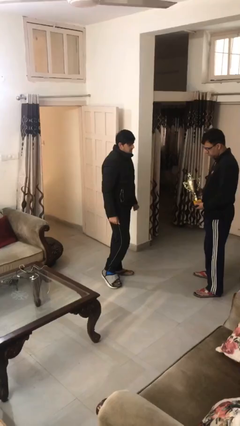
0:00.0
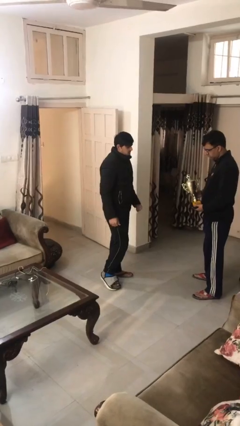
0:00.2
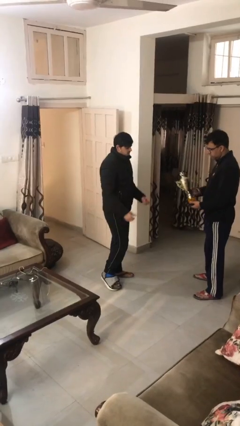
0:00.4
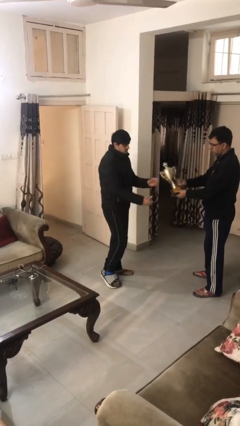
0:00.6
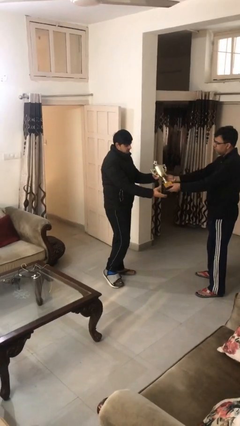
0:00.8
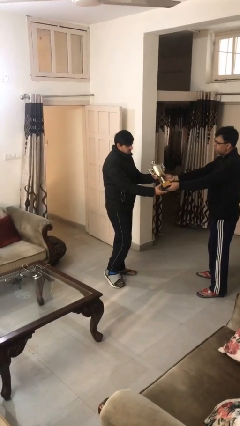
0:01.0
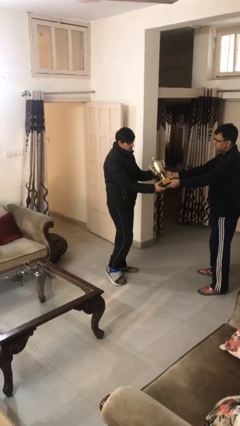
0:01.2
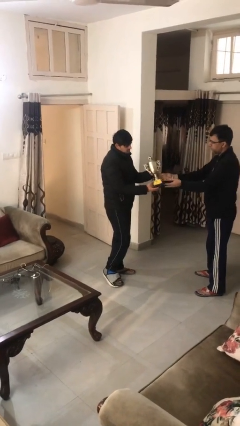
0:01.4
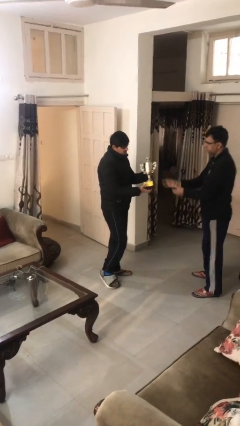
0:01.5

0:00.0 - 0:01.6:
person transfers object to person

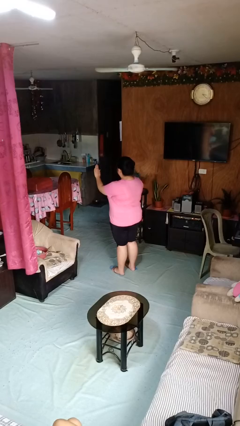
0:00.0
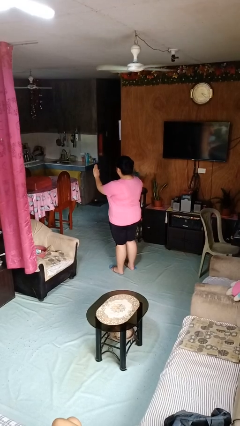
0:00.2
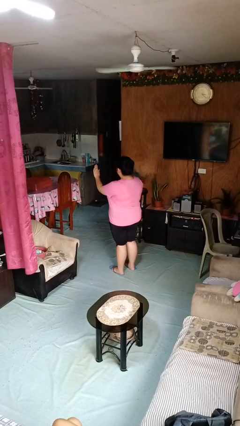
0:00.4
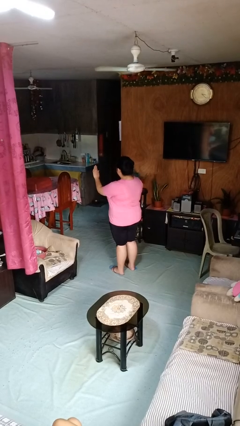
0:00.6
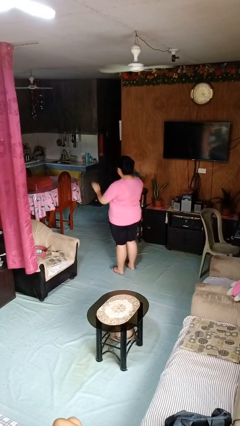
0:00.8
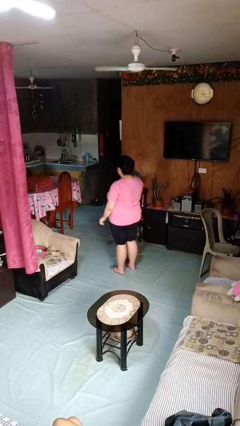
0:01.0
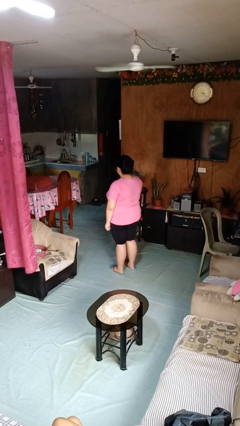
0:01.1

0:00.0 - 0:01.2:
person gestures stop

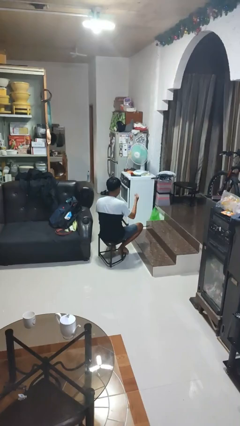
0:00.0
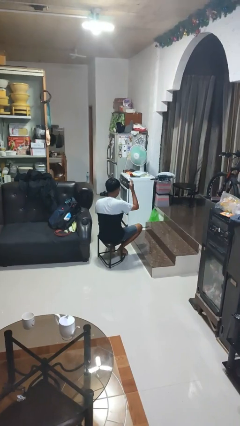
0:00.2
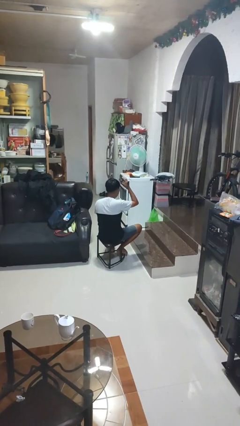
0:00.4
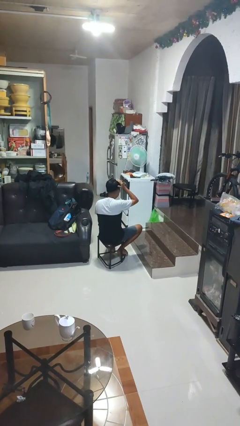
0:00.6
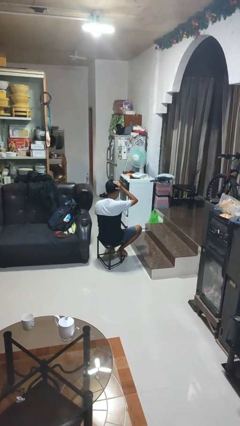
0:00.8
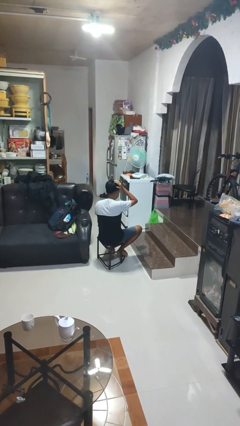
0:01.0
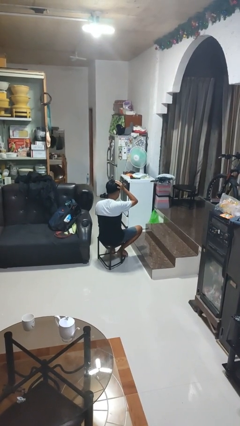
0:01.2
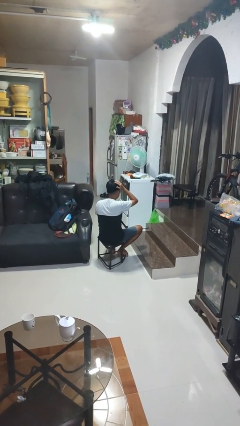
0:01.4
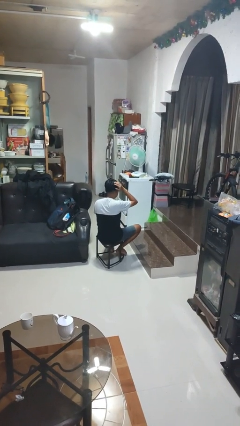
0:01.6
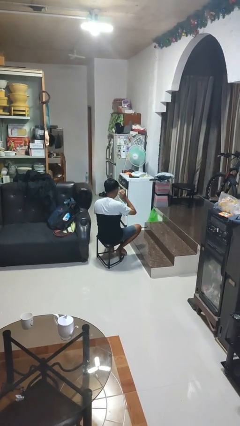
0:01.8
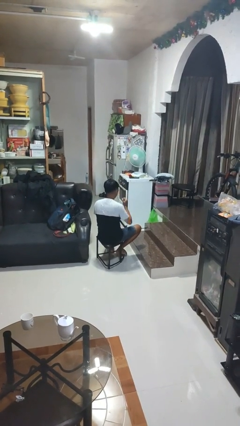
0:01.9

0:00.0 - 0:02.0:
person pats head

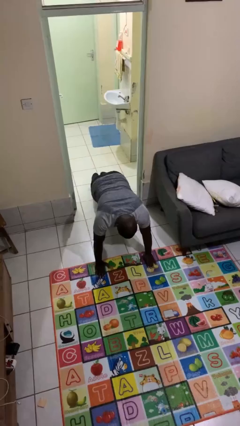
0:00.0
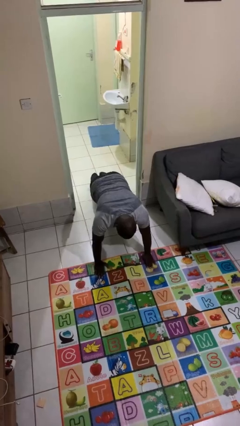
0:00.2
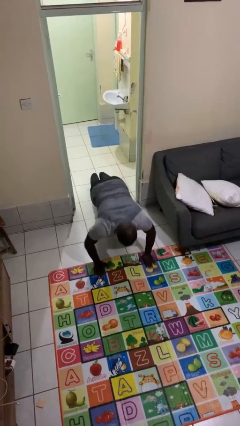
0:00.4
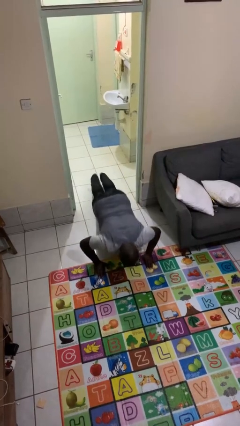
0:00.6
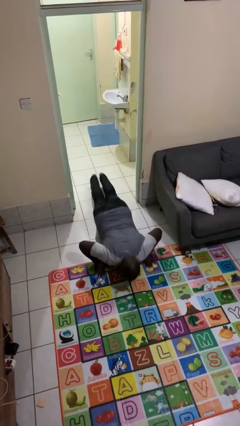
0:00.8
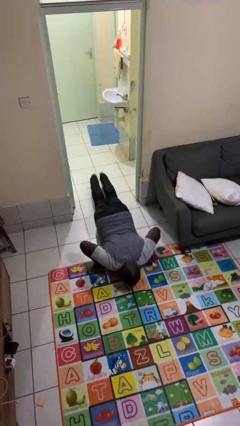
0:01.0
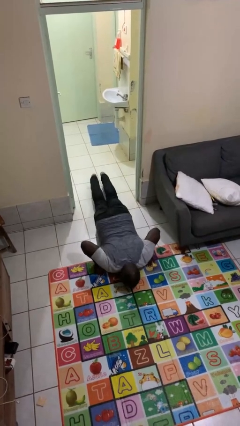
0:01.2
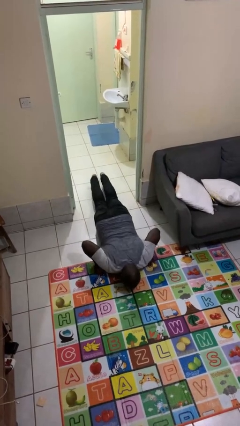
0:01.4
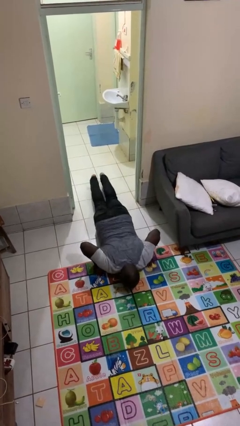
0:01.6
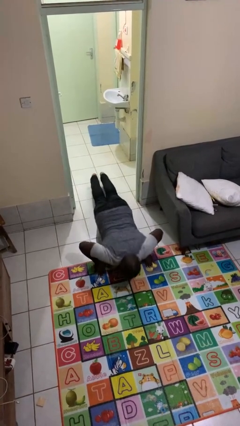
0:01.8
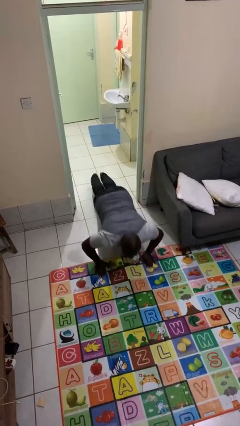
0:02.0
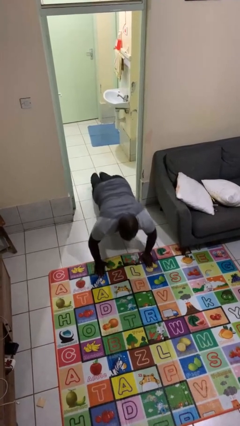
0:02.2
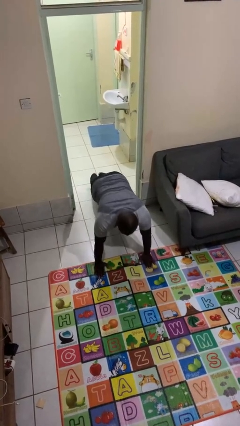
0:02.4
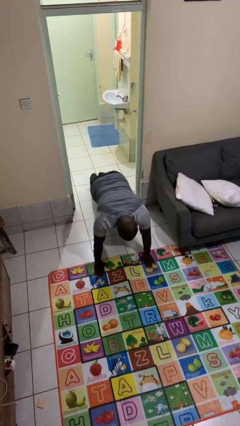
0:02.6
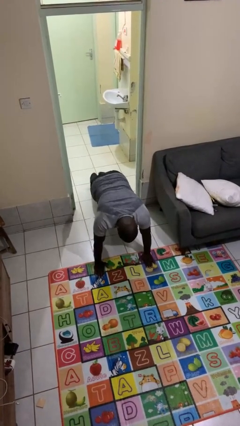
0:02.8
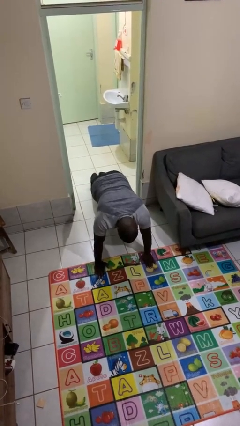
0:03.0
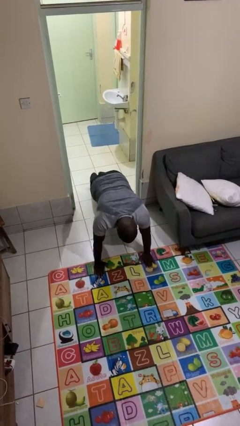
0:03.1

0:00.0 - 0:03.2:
person exercises with pushup

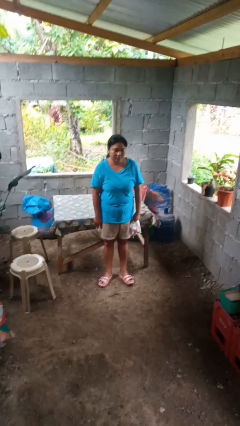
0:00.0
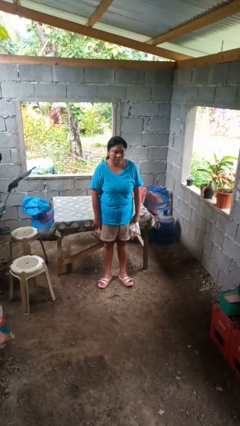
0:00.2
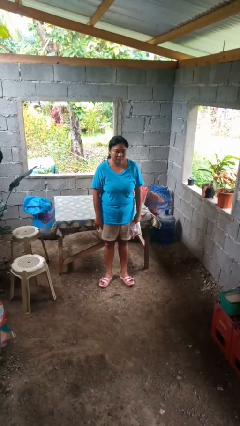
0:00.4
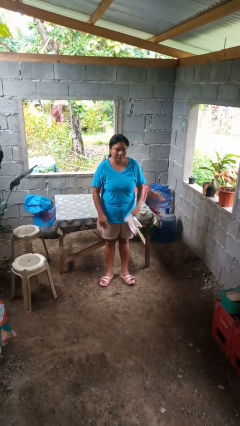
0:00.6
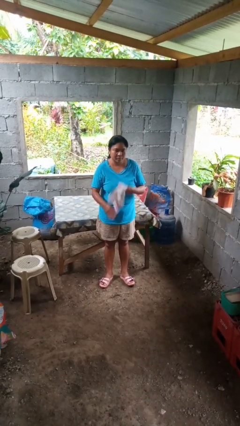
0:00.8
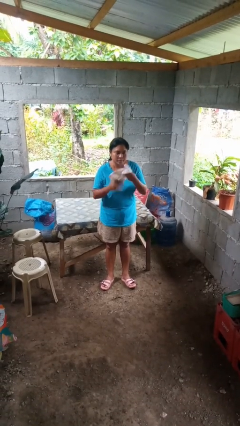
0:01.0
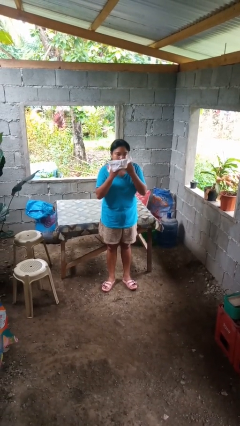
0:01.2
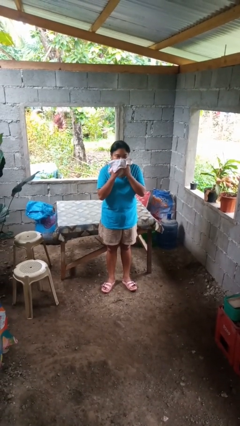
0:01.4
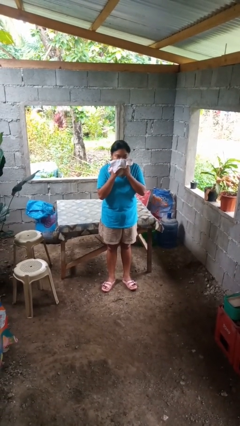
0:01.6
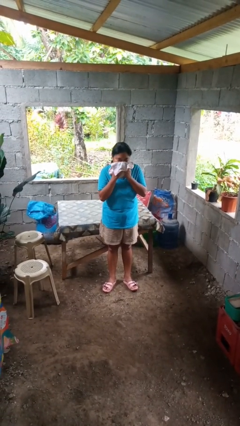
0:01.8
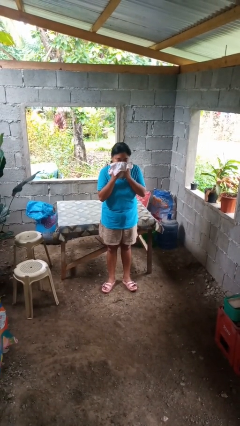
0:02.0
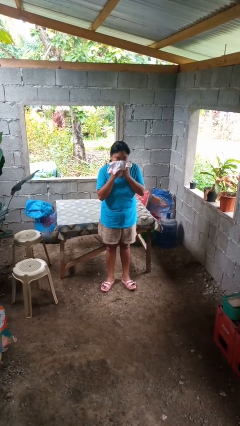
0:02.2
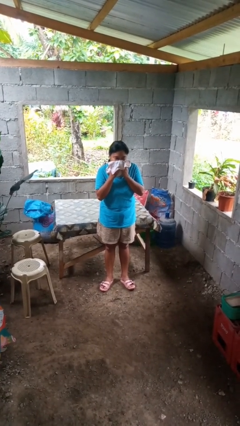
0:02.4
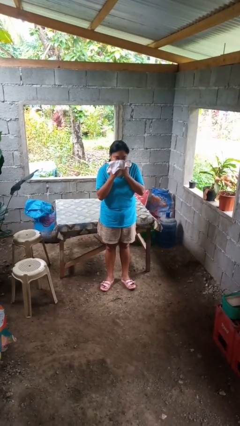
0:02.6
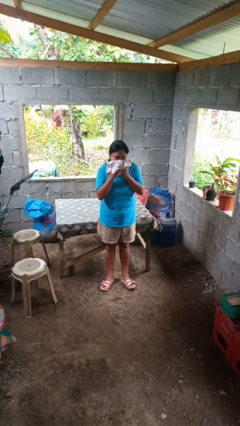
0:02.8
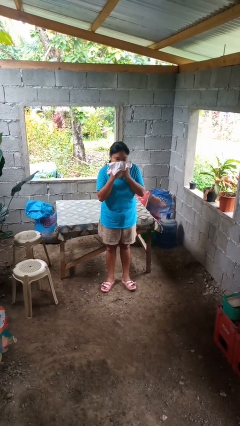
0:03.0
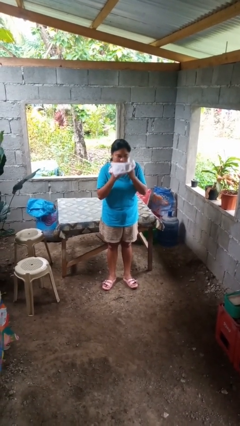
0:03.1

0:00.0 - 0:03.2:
person blows nose

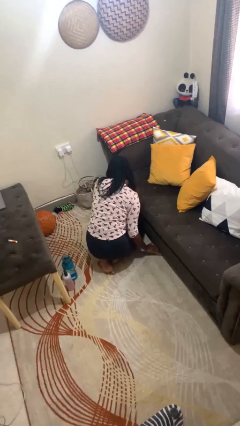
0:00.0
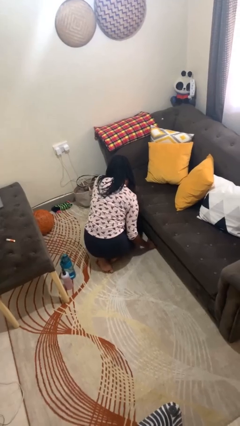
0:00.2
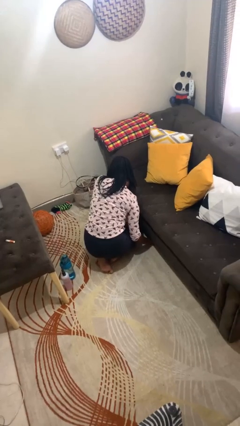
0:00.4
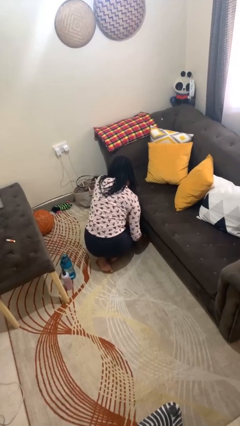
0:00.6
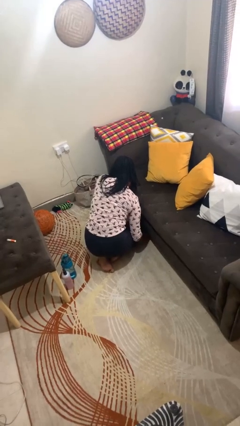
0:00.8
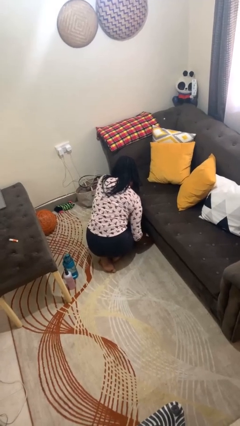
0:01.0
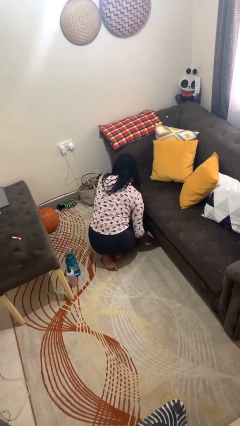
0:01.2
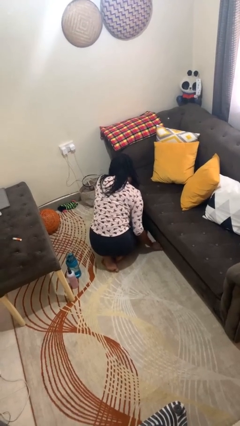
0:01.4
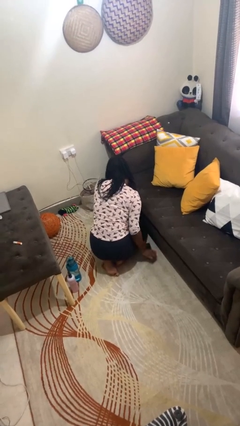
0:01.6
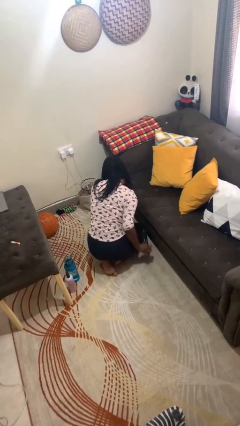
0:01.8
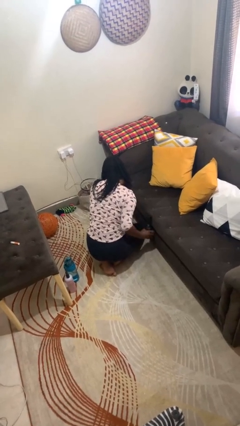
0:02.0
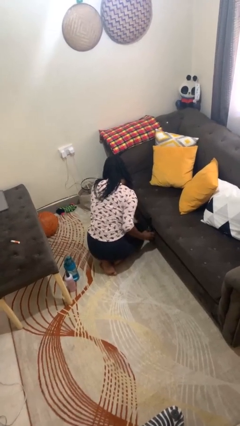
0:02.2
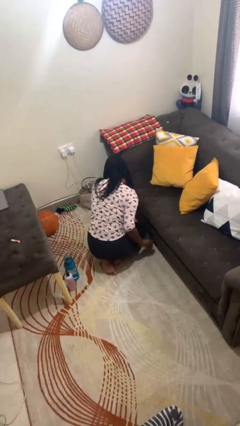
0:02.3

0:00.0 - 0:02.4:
person searches under couch

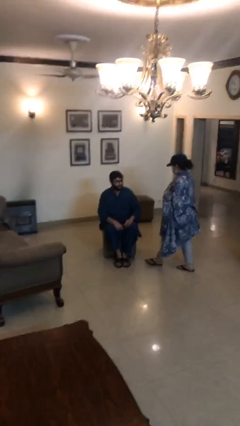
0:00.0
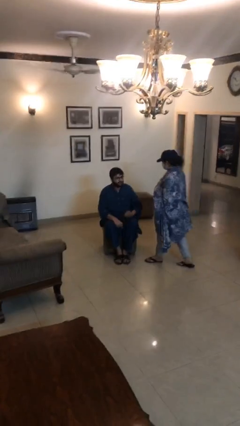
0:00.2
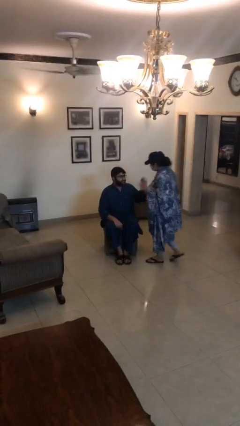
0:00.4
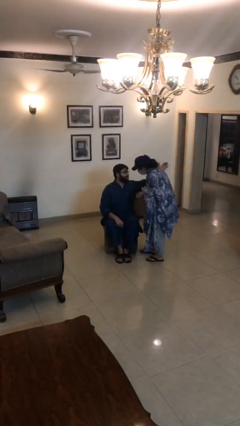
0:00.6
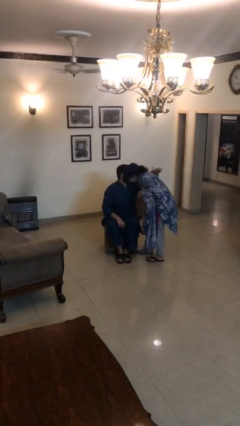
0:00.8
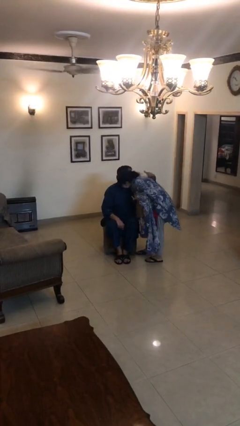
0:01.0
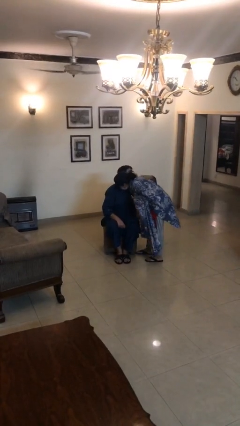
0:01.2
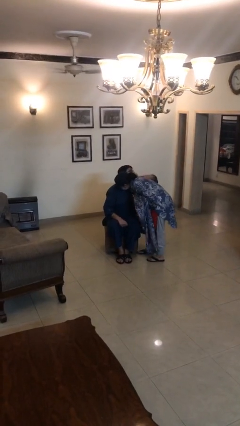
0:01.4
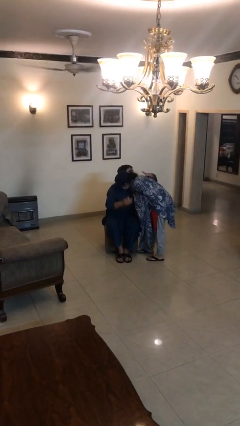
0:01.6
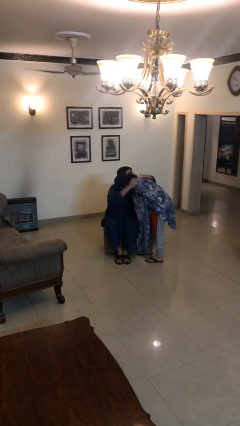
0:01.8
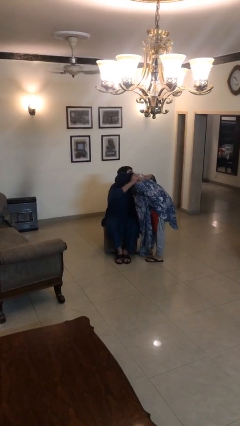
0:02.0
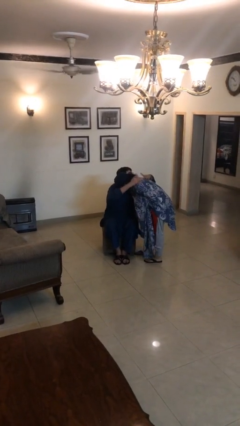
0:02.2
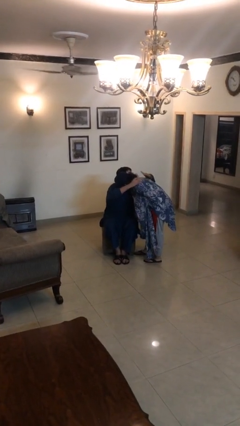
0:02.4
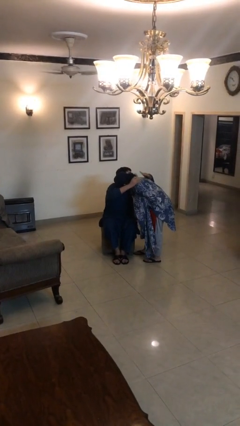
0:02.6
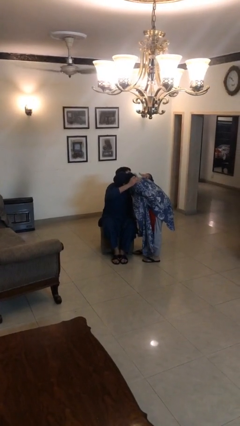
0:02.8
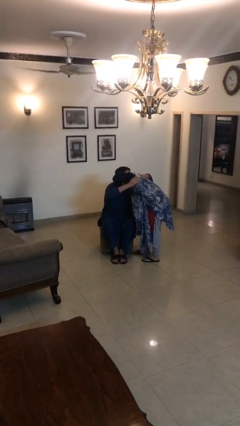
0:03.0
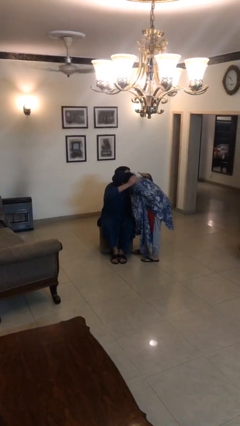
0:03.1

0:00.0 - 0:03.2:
person embraces person

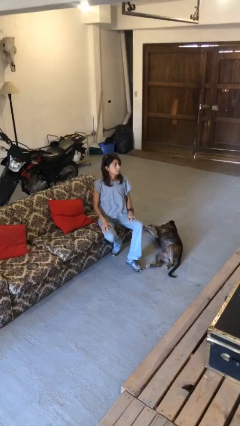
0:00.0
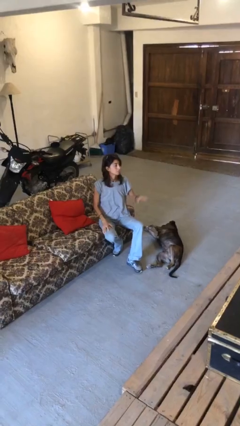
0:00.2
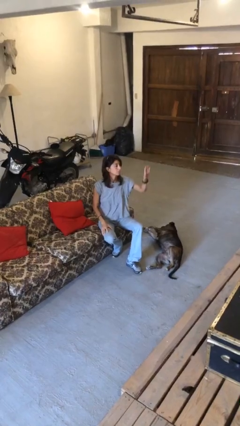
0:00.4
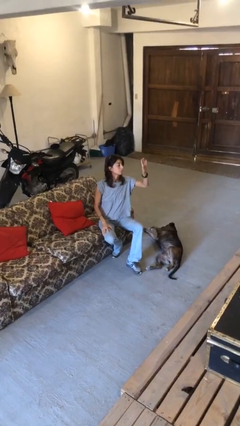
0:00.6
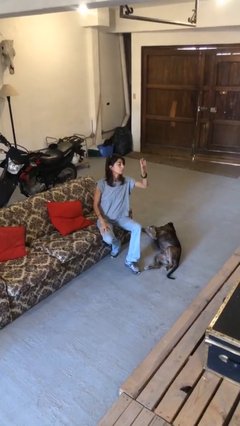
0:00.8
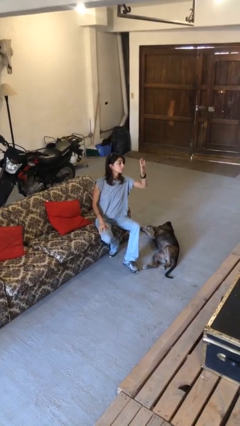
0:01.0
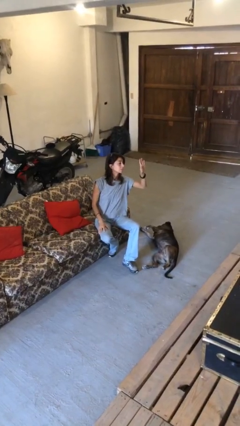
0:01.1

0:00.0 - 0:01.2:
person gestures raise hand
